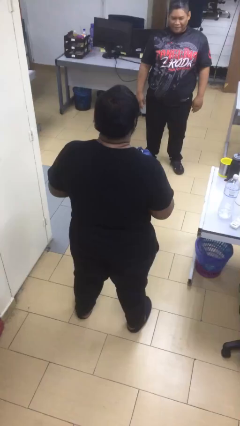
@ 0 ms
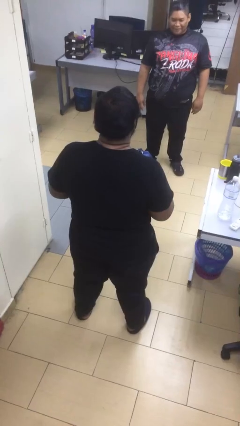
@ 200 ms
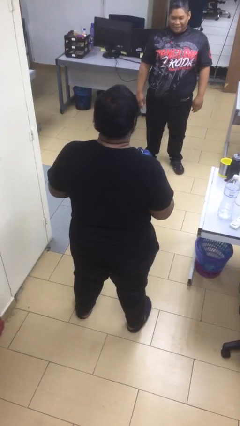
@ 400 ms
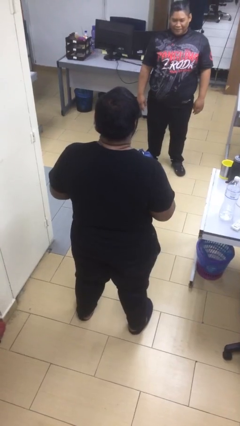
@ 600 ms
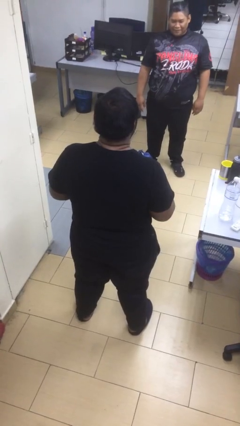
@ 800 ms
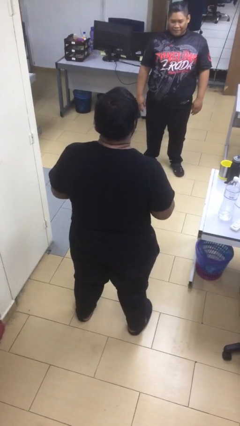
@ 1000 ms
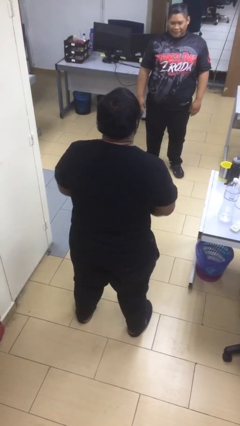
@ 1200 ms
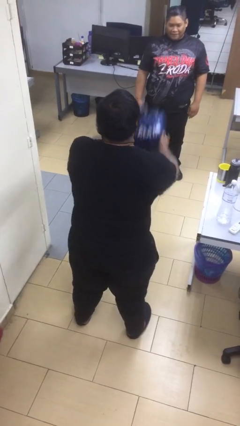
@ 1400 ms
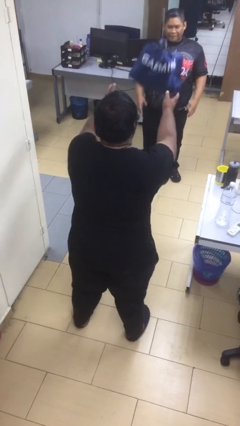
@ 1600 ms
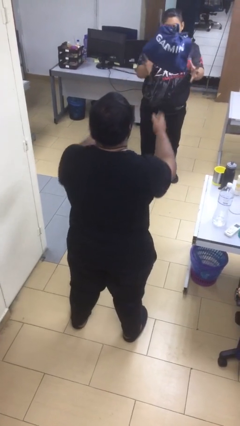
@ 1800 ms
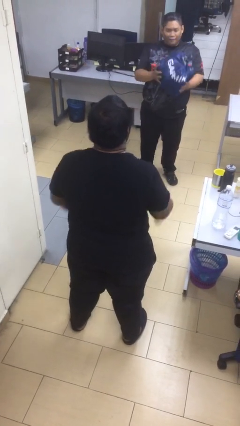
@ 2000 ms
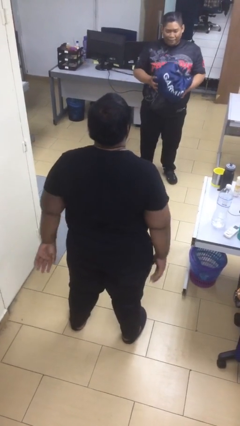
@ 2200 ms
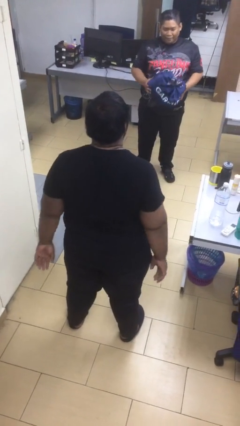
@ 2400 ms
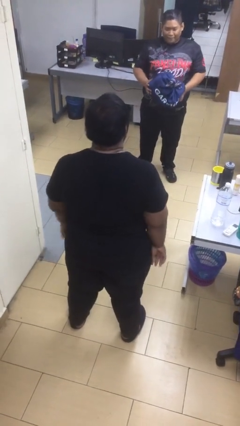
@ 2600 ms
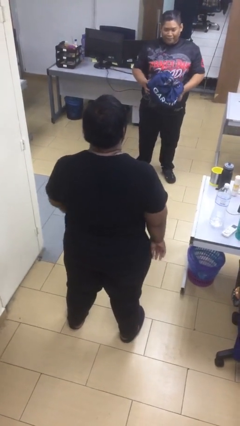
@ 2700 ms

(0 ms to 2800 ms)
person throws object to person

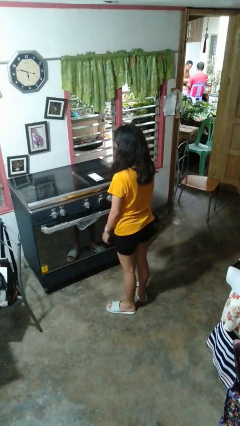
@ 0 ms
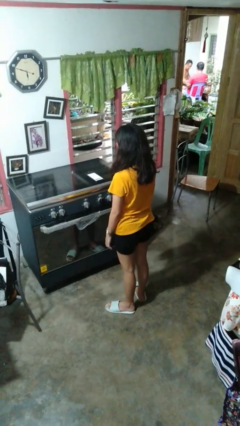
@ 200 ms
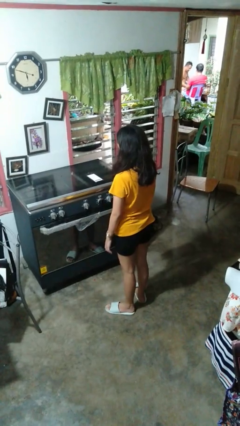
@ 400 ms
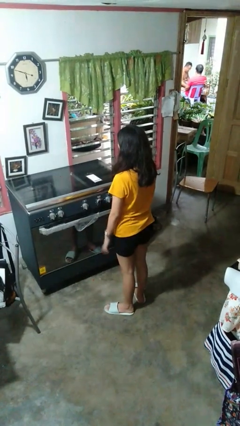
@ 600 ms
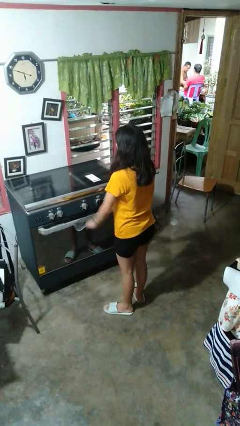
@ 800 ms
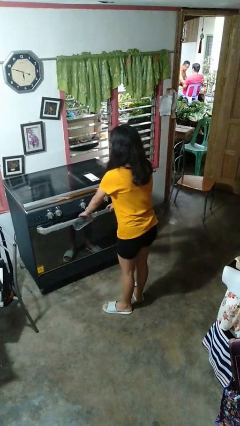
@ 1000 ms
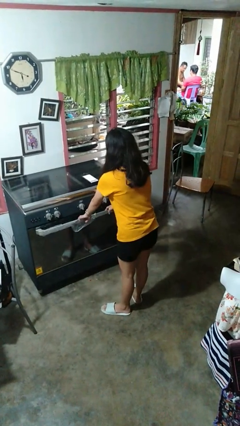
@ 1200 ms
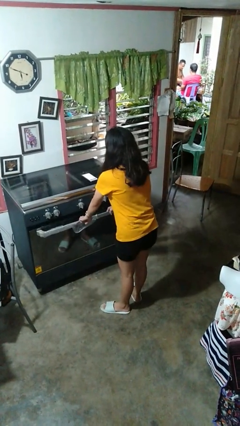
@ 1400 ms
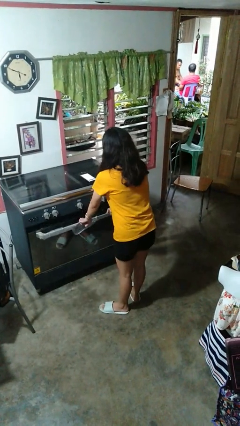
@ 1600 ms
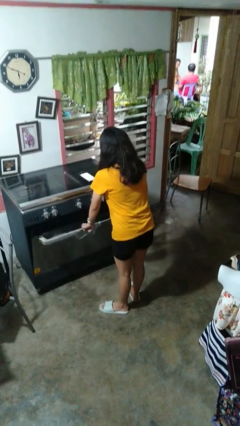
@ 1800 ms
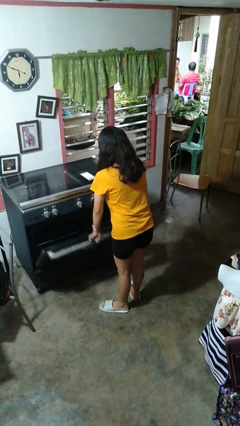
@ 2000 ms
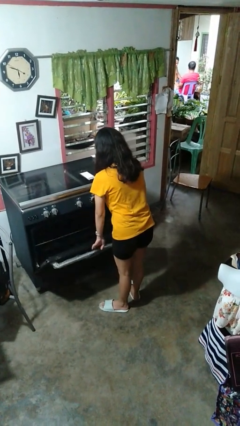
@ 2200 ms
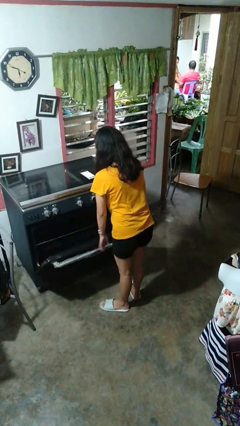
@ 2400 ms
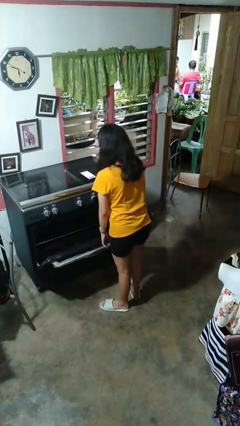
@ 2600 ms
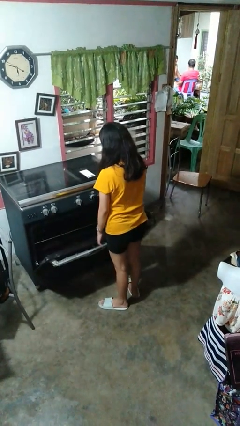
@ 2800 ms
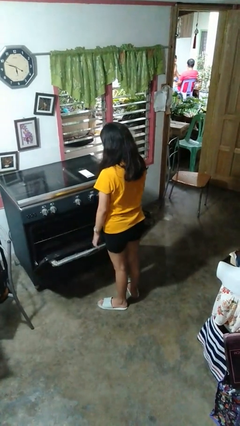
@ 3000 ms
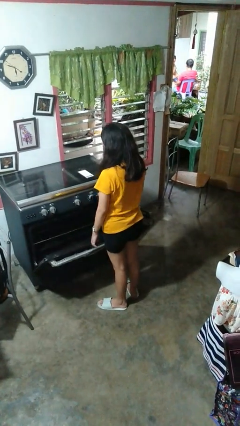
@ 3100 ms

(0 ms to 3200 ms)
person opens oven door

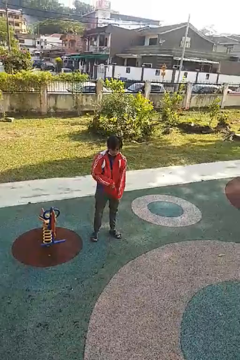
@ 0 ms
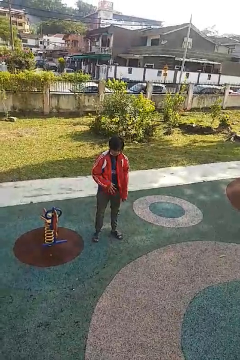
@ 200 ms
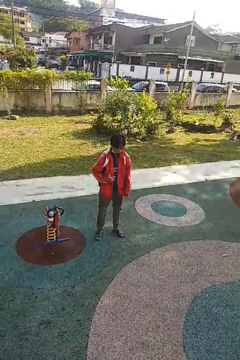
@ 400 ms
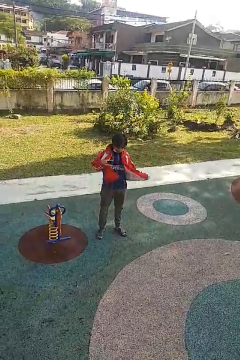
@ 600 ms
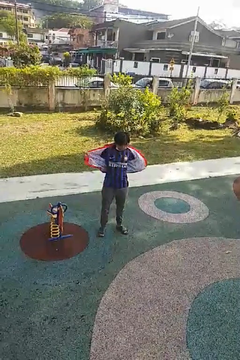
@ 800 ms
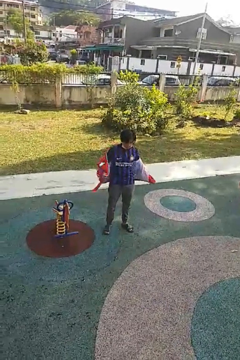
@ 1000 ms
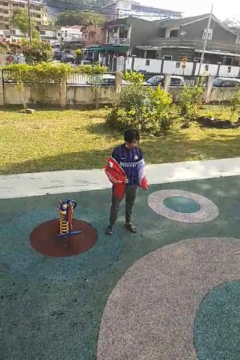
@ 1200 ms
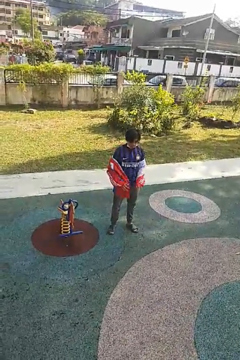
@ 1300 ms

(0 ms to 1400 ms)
person takes off jacket

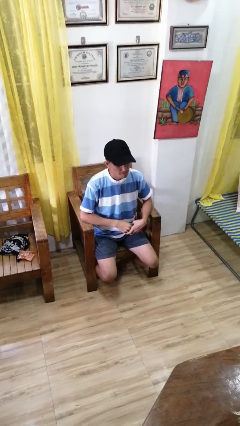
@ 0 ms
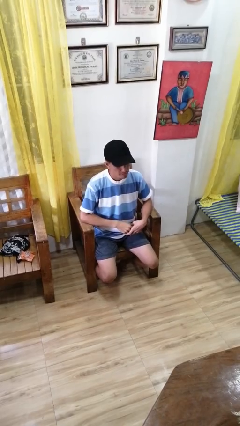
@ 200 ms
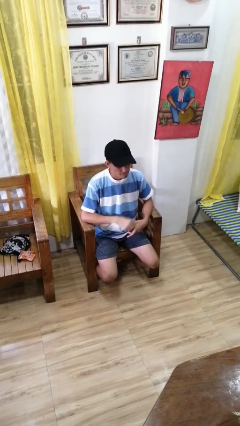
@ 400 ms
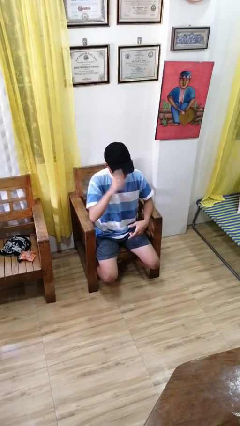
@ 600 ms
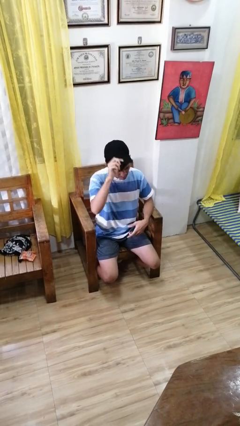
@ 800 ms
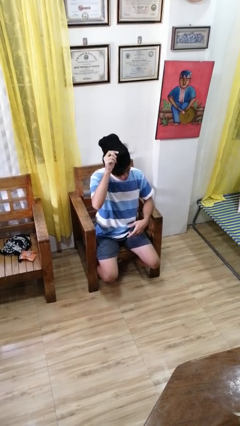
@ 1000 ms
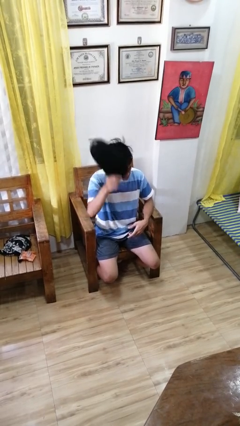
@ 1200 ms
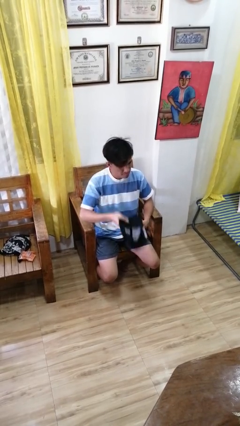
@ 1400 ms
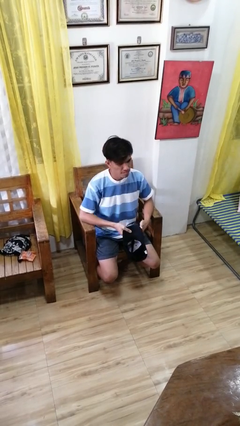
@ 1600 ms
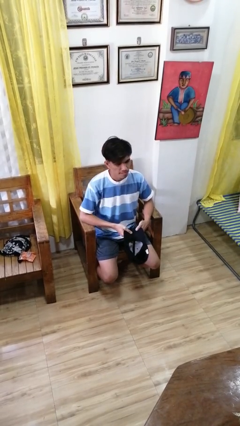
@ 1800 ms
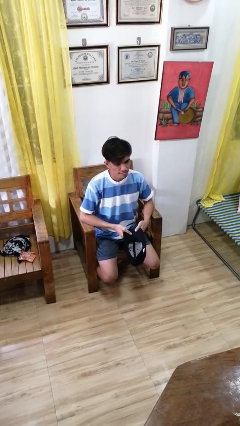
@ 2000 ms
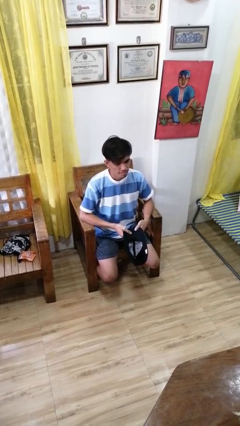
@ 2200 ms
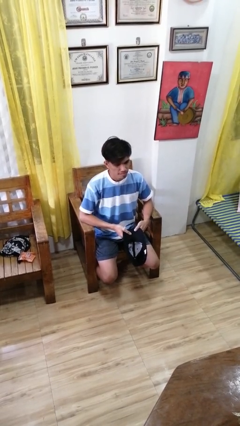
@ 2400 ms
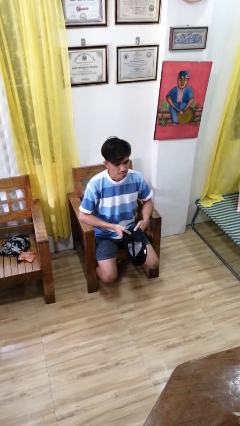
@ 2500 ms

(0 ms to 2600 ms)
person takes off hat

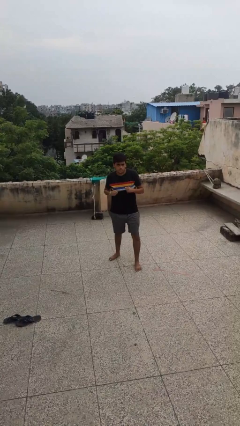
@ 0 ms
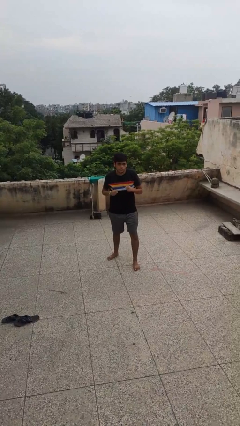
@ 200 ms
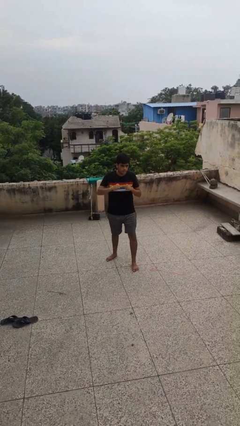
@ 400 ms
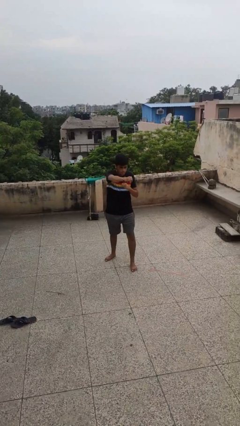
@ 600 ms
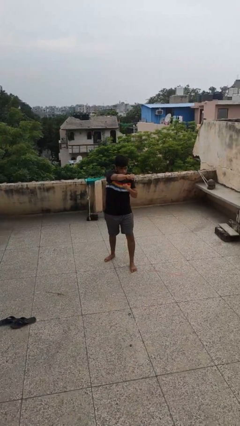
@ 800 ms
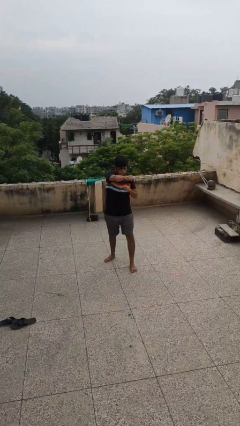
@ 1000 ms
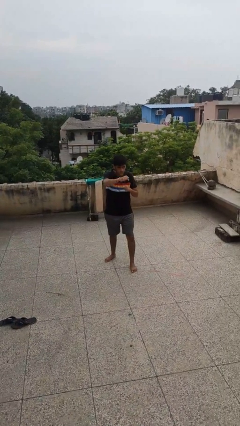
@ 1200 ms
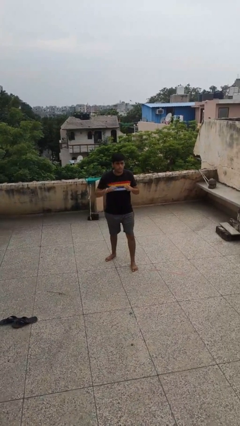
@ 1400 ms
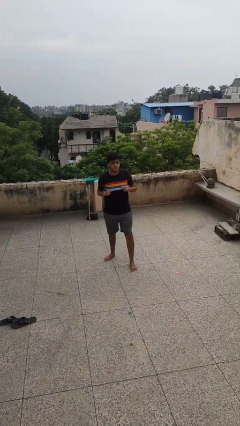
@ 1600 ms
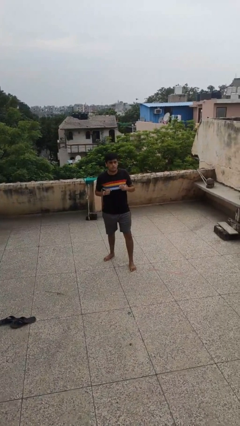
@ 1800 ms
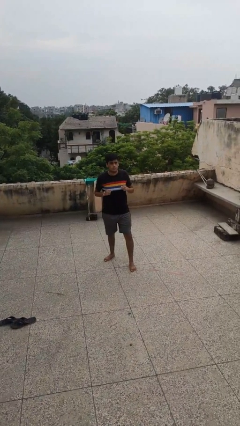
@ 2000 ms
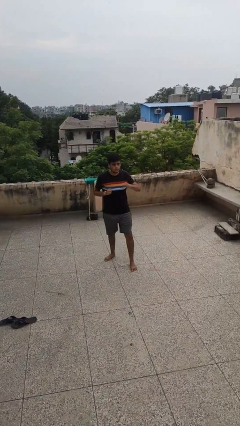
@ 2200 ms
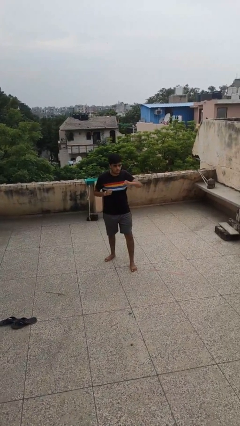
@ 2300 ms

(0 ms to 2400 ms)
person punches

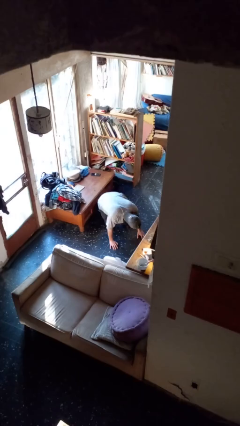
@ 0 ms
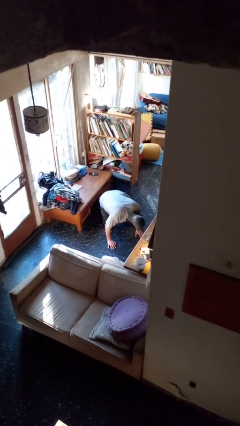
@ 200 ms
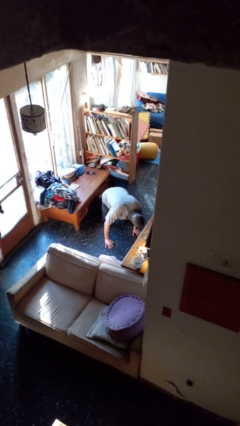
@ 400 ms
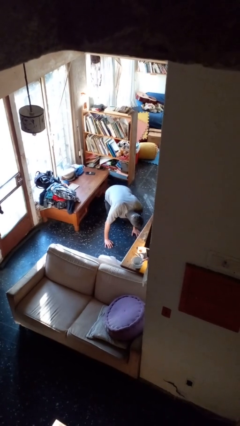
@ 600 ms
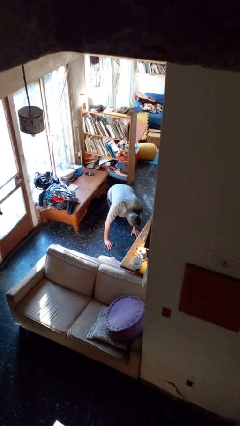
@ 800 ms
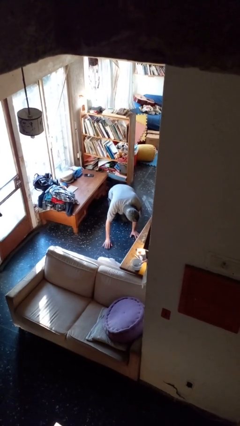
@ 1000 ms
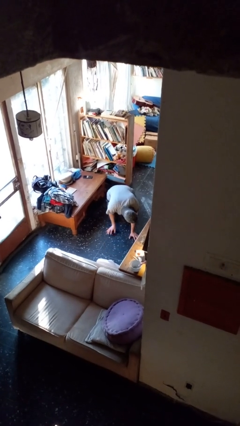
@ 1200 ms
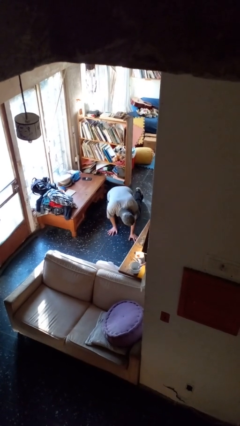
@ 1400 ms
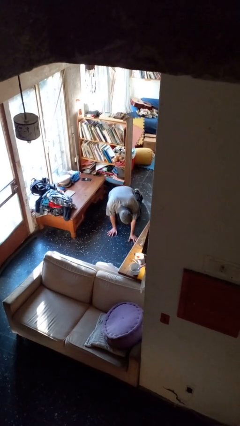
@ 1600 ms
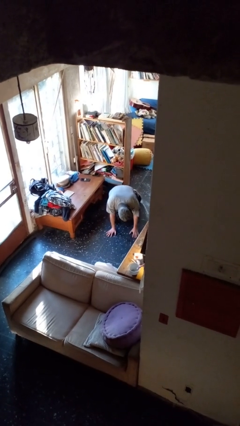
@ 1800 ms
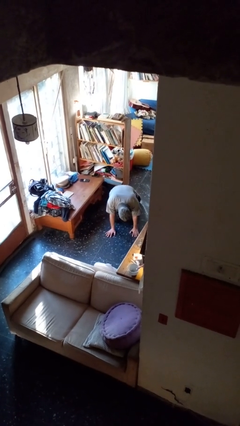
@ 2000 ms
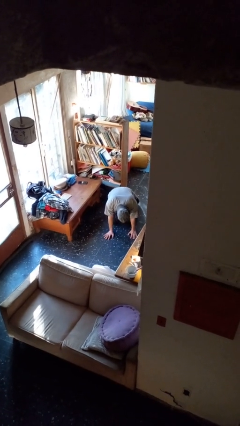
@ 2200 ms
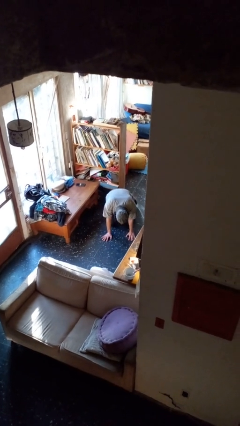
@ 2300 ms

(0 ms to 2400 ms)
person crawls

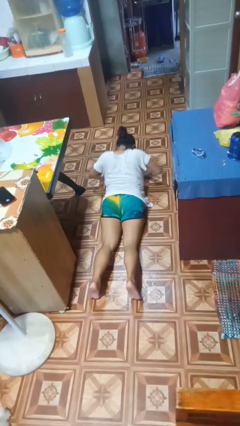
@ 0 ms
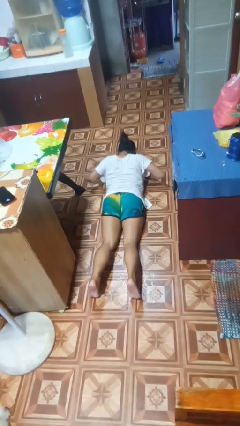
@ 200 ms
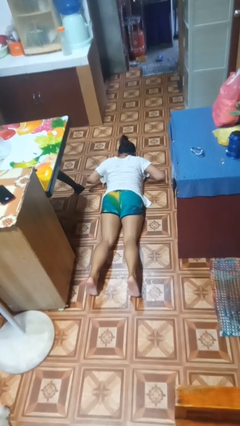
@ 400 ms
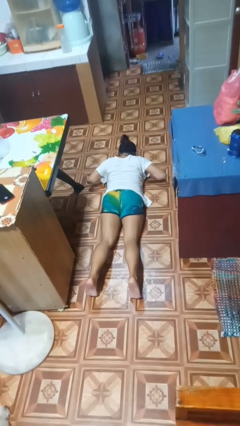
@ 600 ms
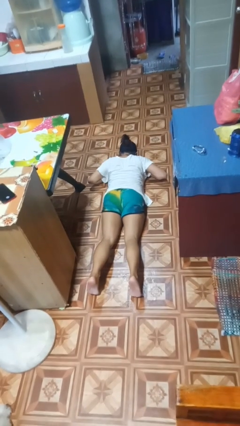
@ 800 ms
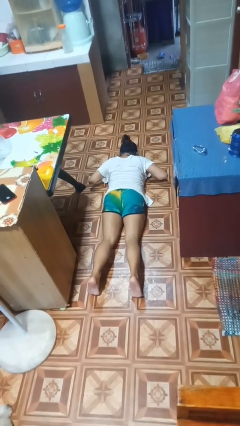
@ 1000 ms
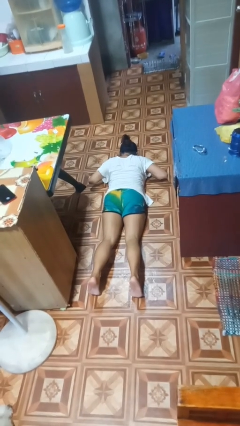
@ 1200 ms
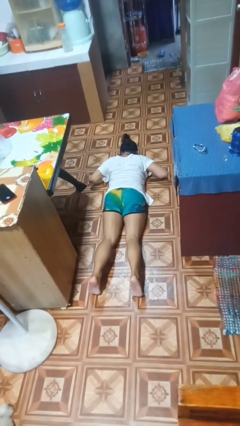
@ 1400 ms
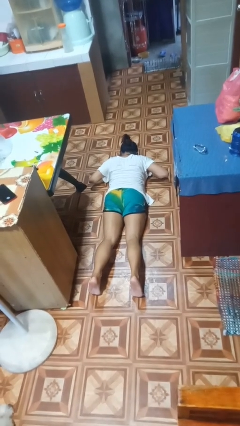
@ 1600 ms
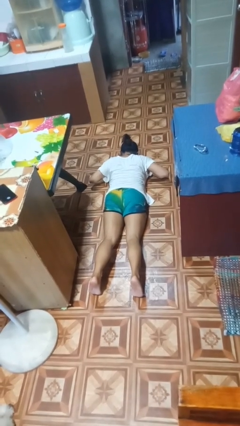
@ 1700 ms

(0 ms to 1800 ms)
person exercises with pushup

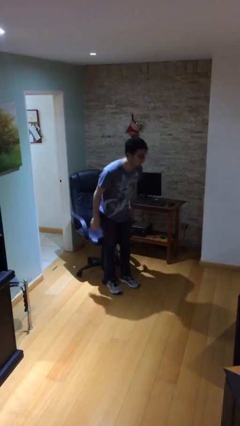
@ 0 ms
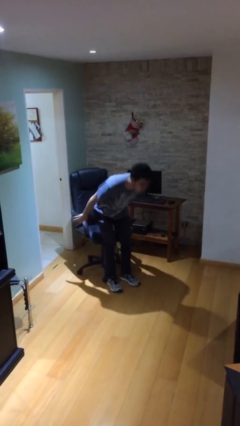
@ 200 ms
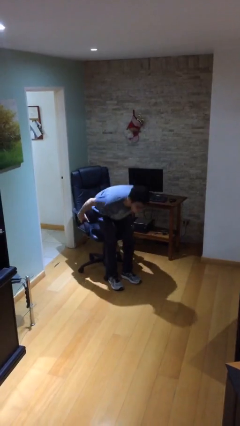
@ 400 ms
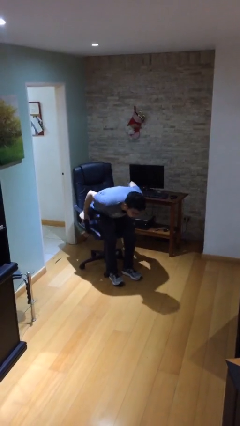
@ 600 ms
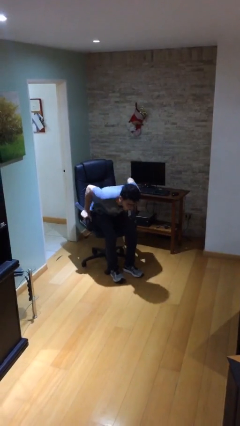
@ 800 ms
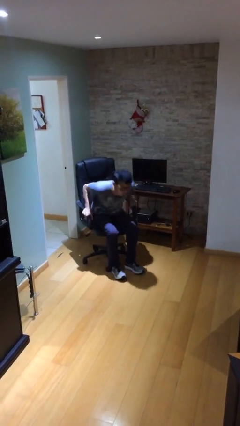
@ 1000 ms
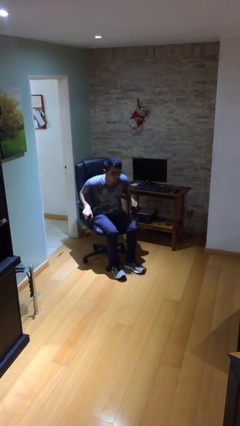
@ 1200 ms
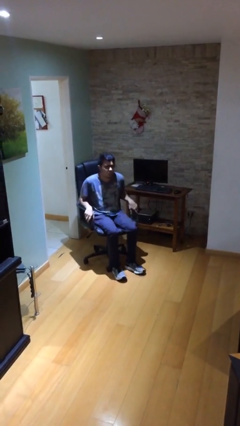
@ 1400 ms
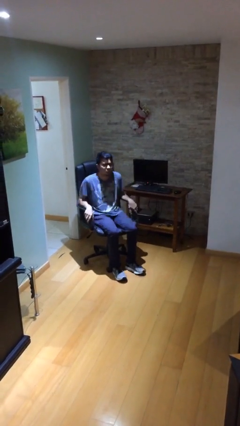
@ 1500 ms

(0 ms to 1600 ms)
person sits down
